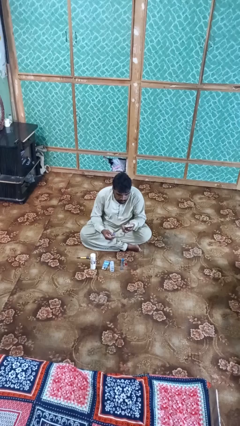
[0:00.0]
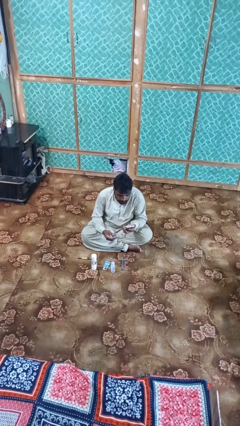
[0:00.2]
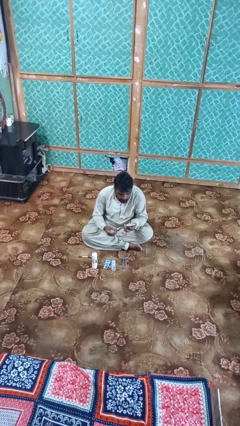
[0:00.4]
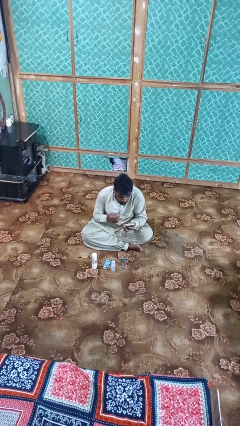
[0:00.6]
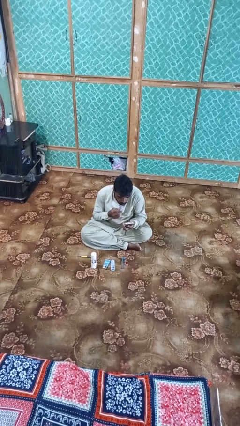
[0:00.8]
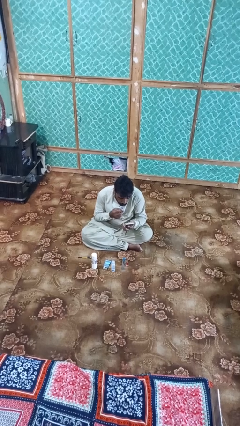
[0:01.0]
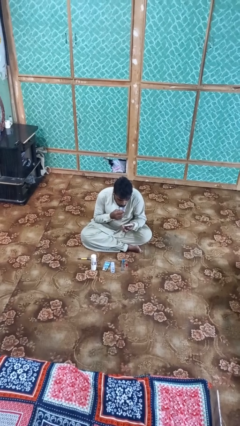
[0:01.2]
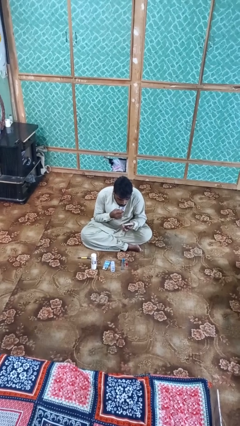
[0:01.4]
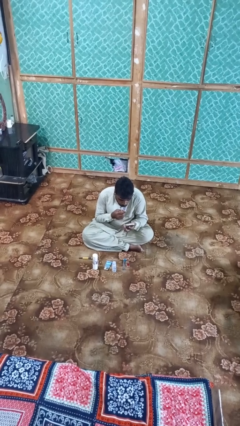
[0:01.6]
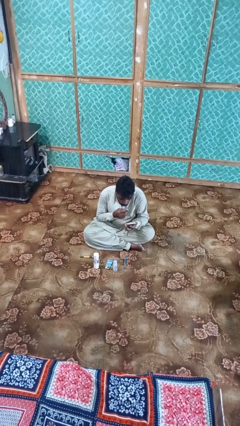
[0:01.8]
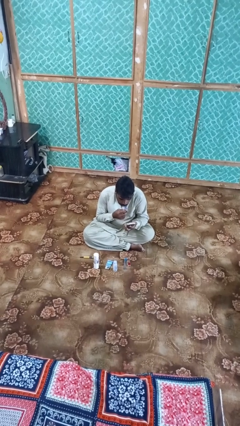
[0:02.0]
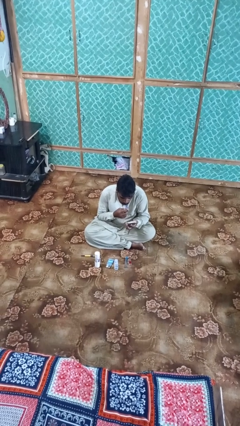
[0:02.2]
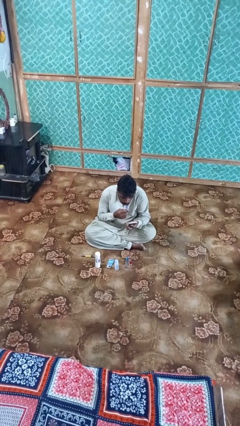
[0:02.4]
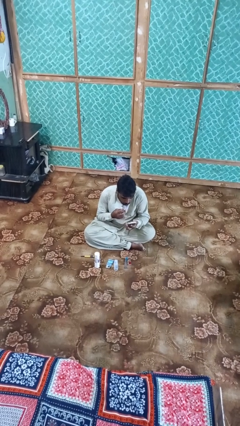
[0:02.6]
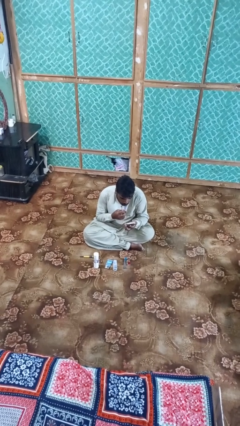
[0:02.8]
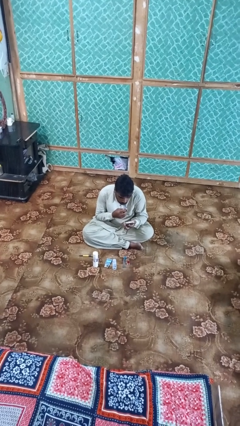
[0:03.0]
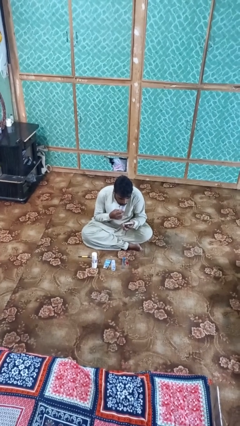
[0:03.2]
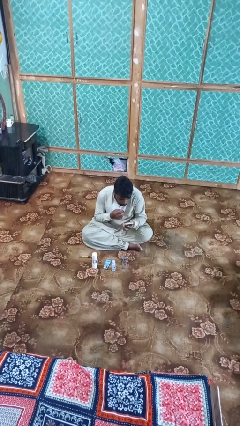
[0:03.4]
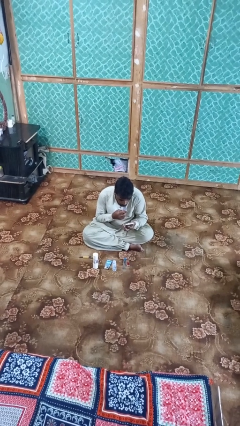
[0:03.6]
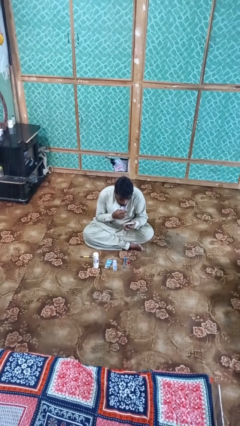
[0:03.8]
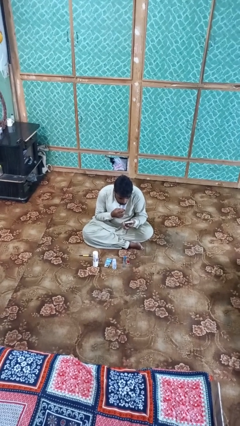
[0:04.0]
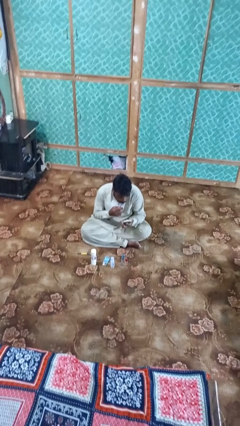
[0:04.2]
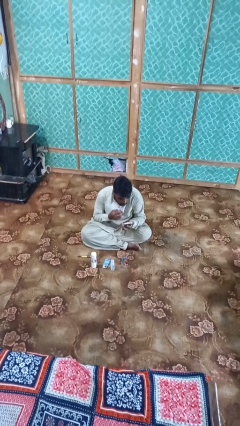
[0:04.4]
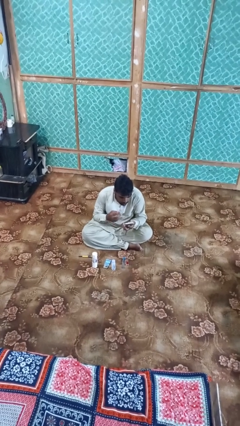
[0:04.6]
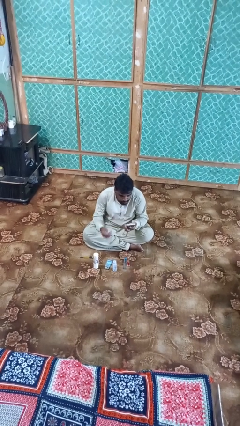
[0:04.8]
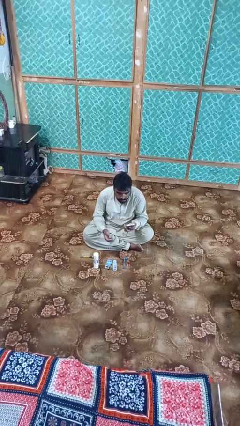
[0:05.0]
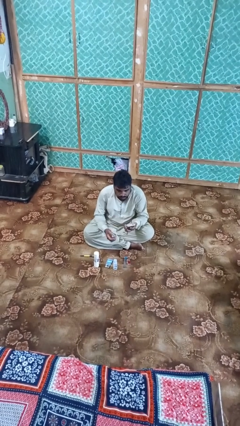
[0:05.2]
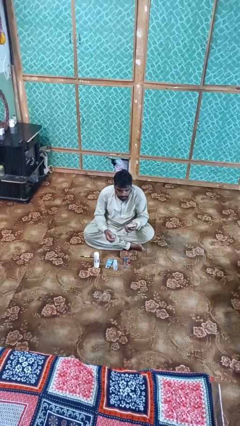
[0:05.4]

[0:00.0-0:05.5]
person applies lip makeup

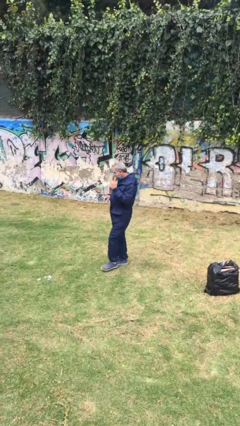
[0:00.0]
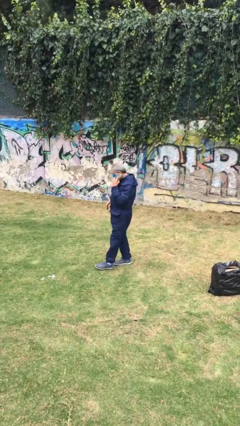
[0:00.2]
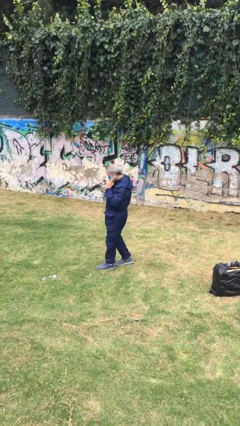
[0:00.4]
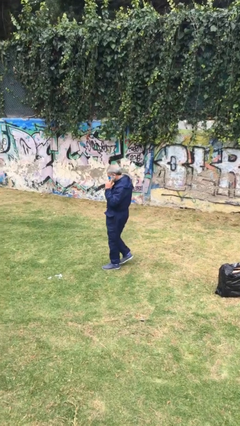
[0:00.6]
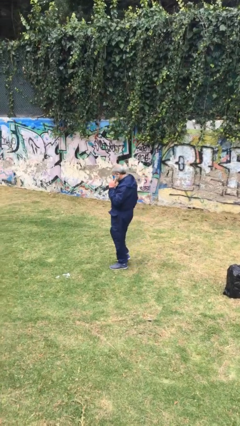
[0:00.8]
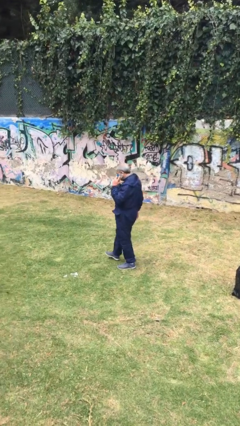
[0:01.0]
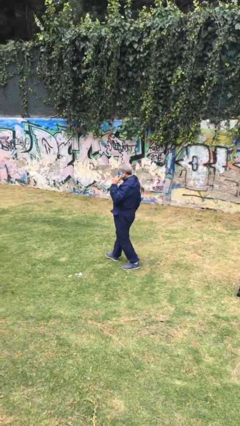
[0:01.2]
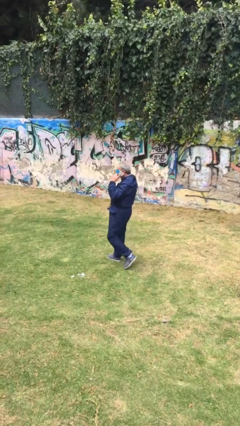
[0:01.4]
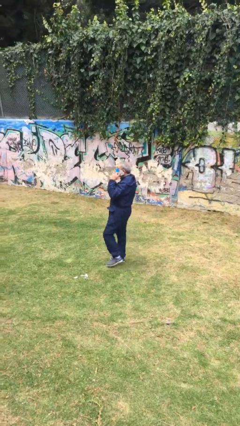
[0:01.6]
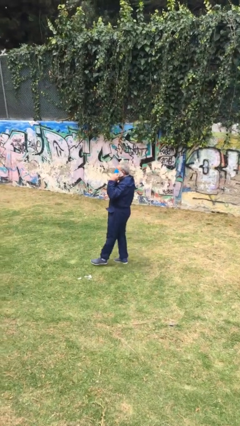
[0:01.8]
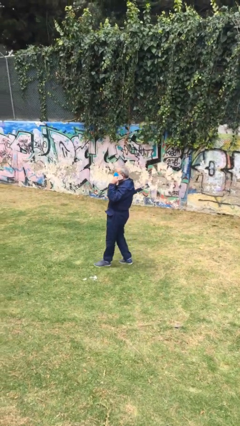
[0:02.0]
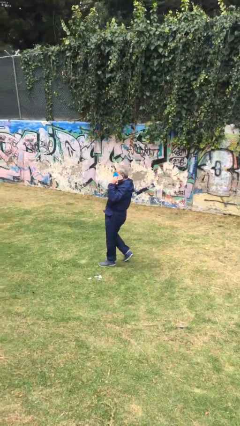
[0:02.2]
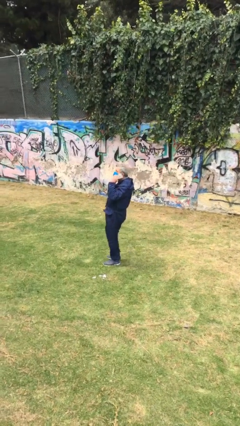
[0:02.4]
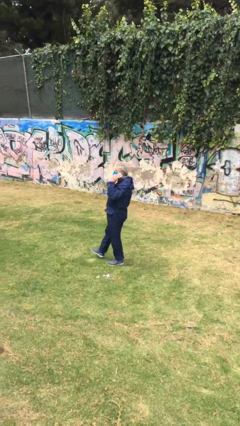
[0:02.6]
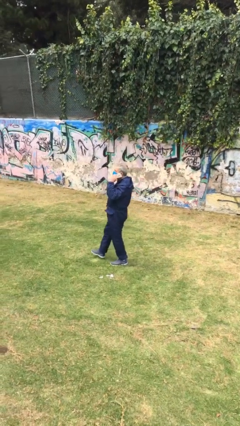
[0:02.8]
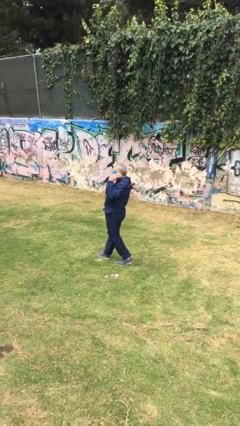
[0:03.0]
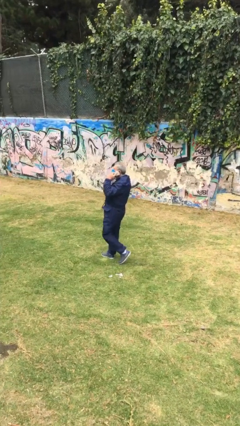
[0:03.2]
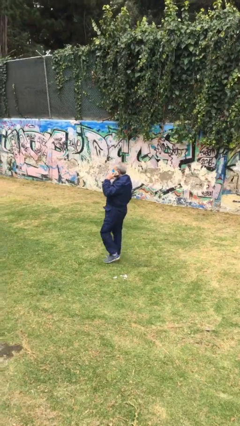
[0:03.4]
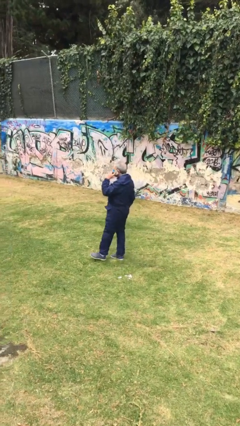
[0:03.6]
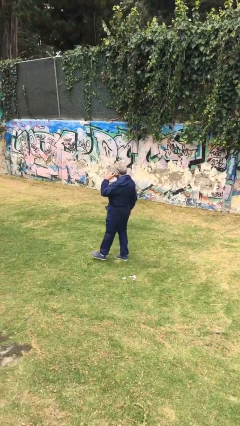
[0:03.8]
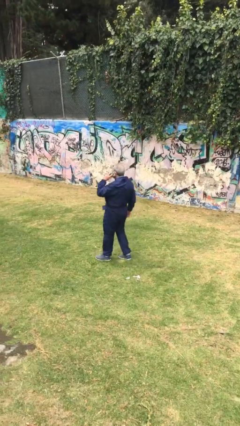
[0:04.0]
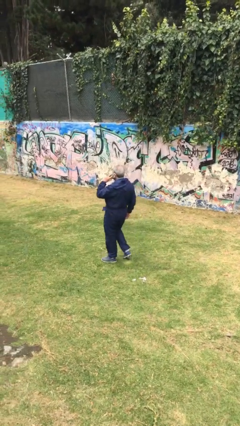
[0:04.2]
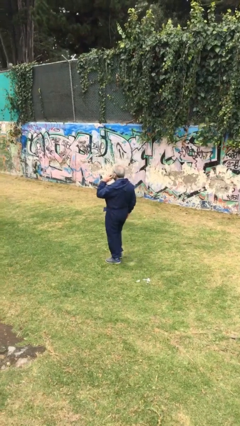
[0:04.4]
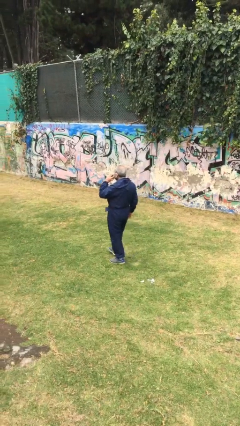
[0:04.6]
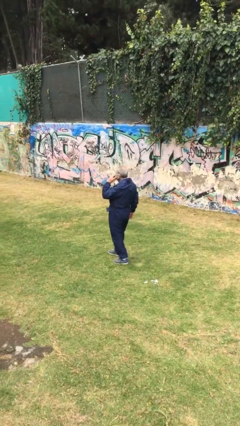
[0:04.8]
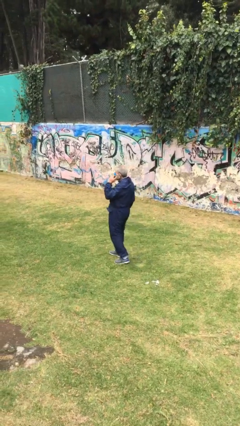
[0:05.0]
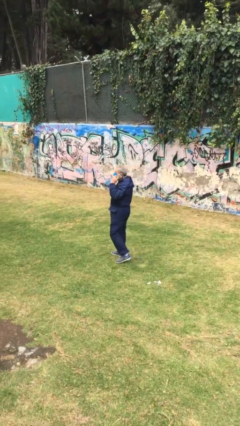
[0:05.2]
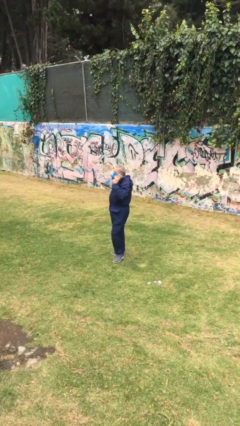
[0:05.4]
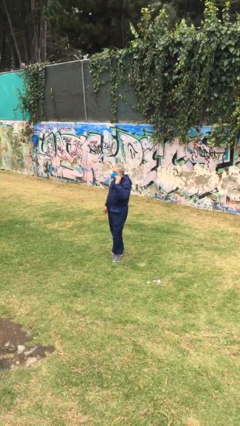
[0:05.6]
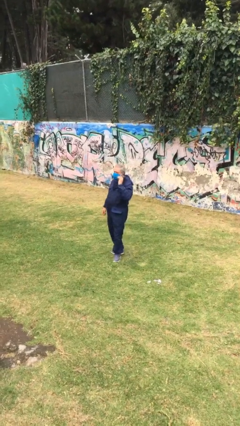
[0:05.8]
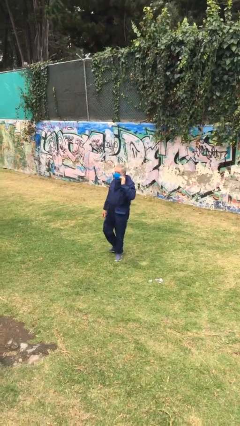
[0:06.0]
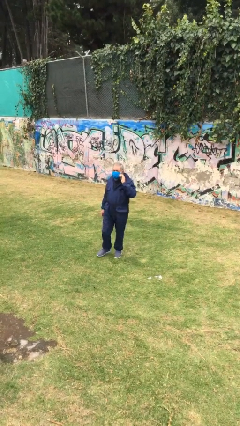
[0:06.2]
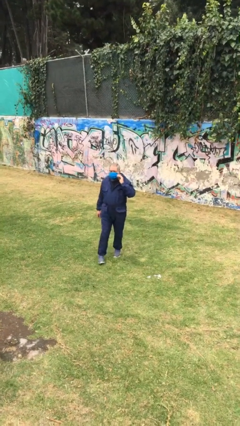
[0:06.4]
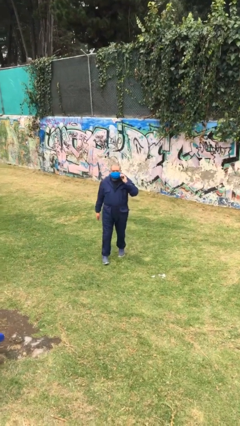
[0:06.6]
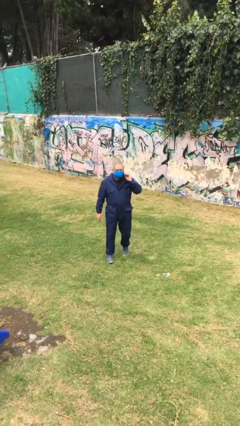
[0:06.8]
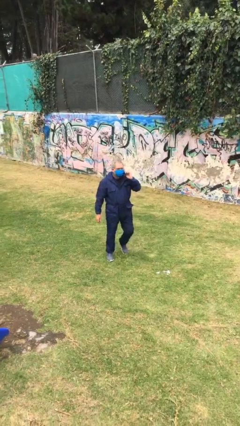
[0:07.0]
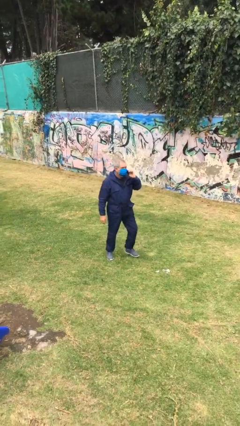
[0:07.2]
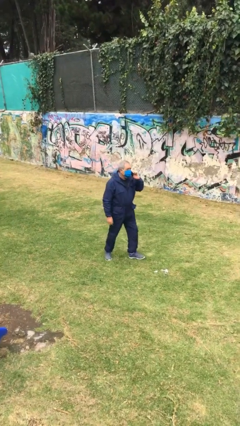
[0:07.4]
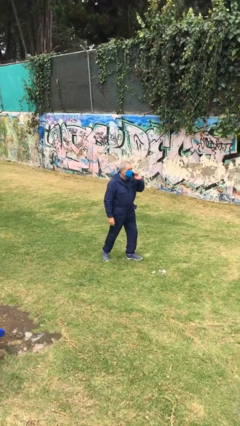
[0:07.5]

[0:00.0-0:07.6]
person talks on phone

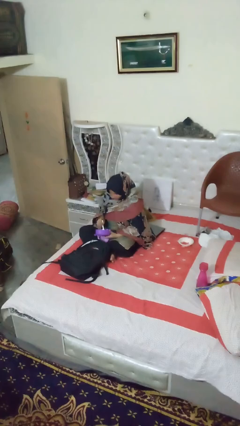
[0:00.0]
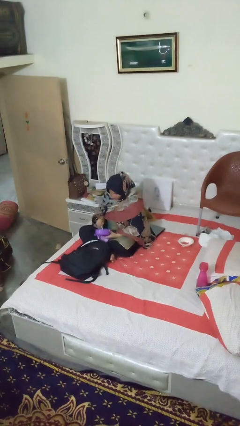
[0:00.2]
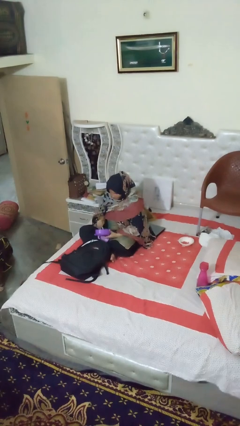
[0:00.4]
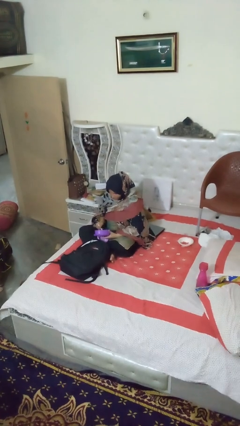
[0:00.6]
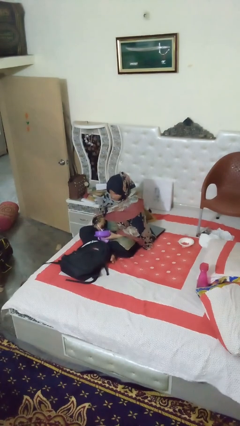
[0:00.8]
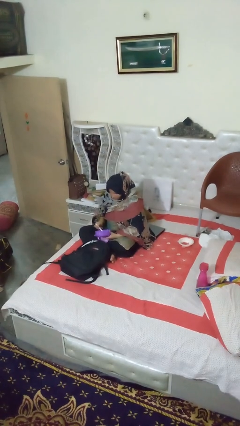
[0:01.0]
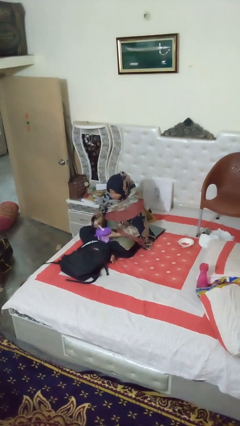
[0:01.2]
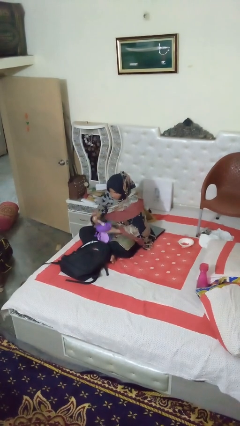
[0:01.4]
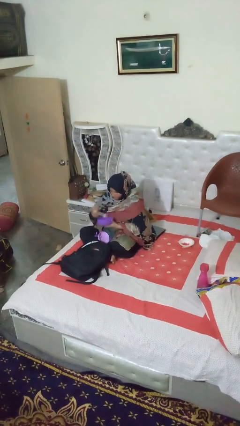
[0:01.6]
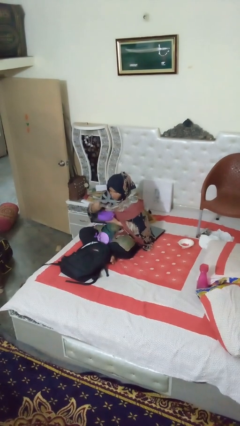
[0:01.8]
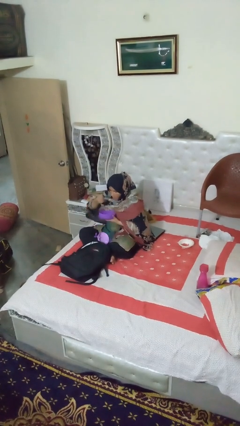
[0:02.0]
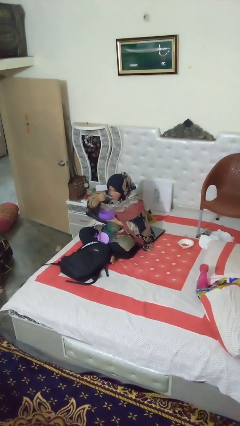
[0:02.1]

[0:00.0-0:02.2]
person eats snack from bag

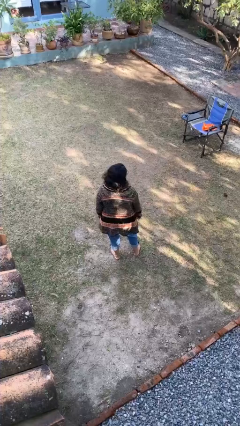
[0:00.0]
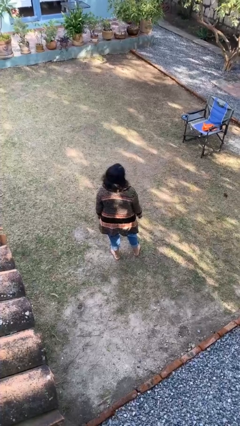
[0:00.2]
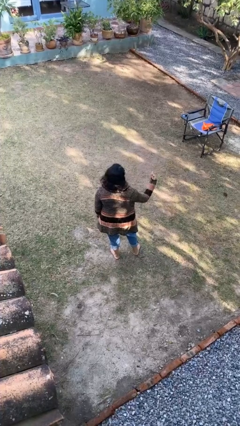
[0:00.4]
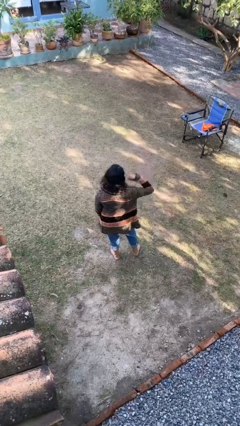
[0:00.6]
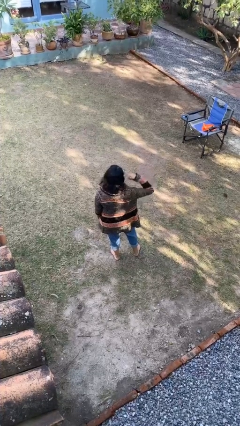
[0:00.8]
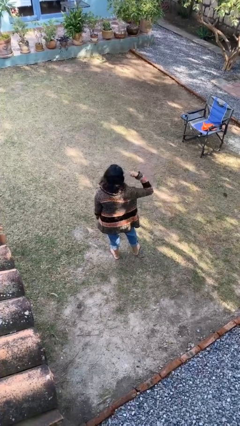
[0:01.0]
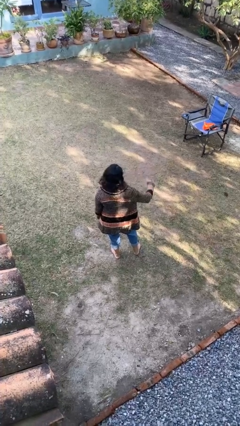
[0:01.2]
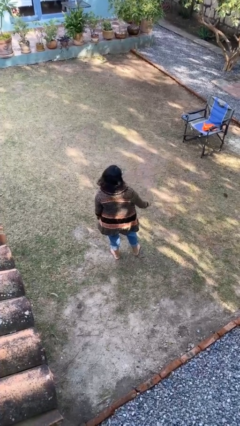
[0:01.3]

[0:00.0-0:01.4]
person gestures call me

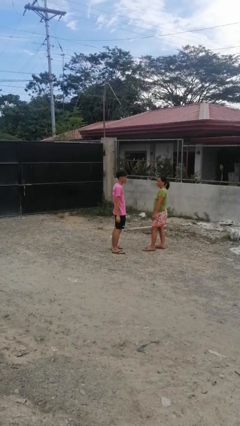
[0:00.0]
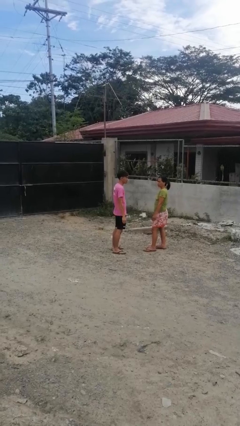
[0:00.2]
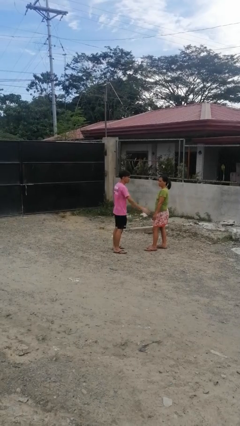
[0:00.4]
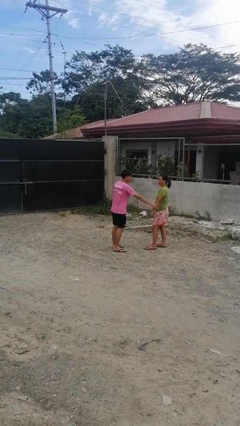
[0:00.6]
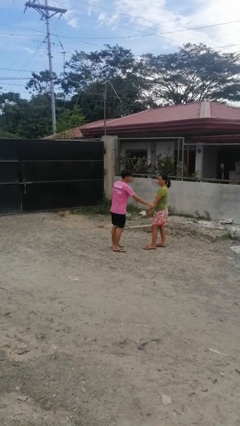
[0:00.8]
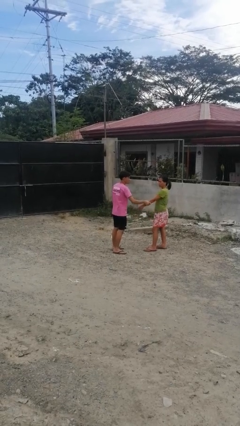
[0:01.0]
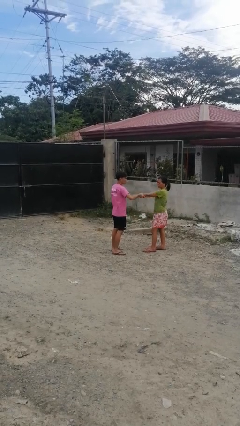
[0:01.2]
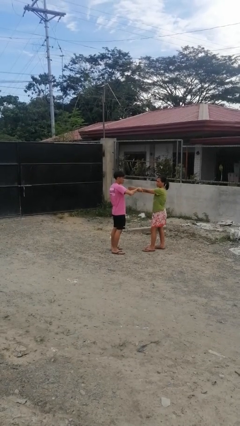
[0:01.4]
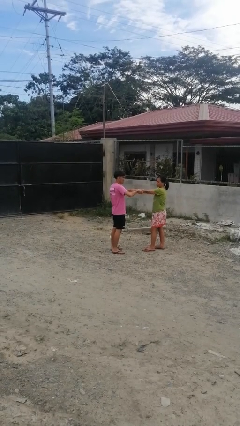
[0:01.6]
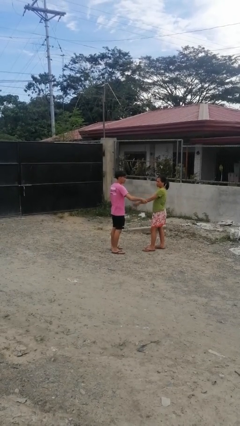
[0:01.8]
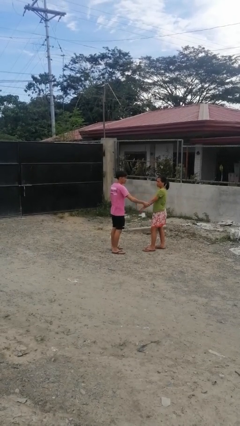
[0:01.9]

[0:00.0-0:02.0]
person grabs person by forearm
